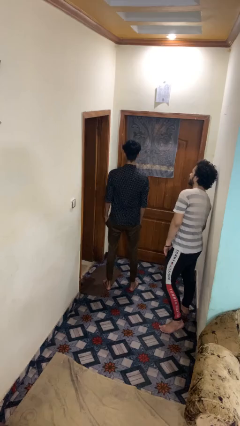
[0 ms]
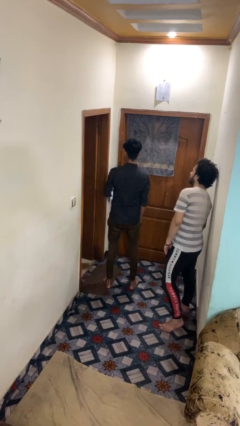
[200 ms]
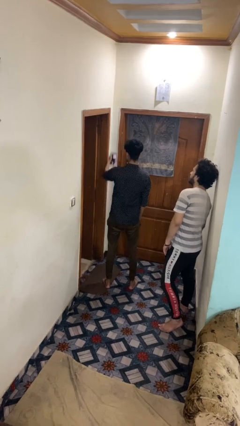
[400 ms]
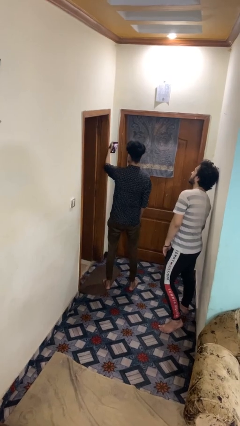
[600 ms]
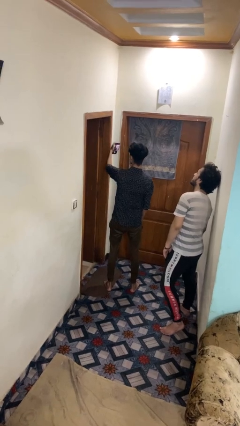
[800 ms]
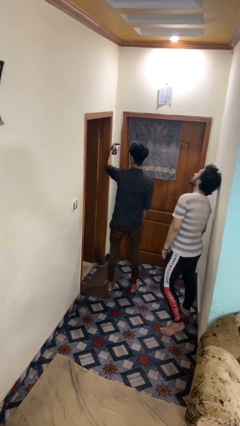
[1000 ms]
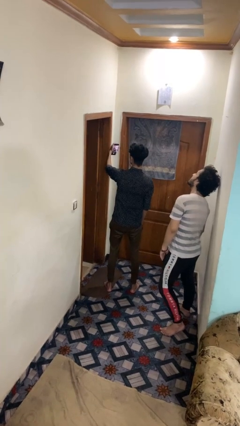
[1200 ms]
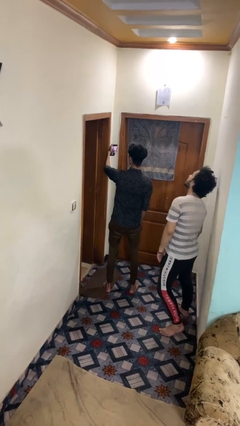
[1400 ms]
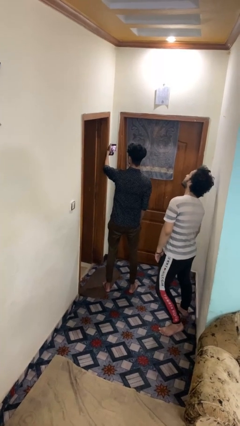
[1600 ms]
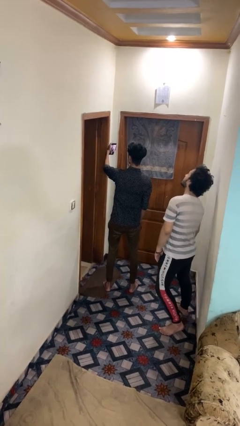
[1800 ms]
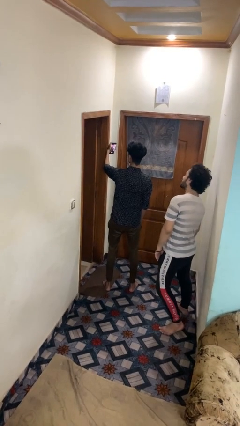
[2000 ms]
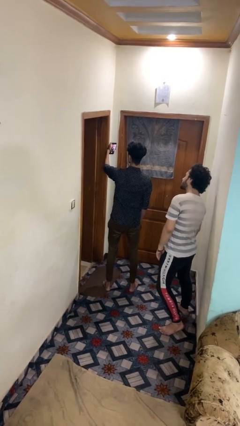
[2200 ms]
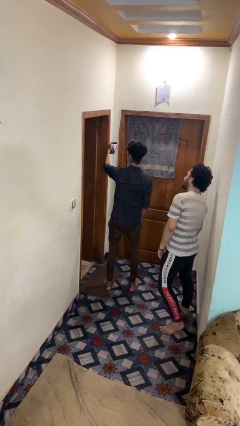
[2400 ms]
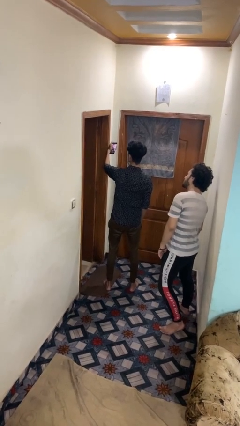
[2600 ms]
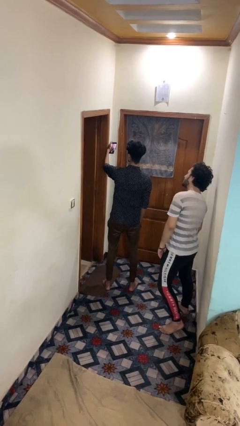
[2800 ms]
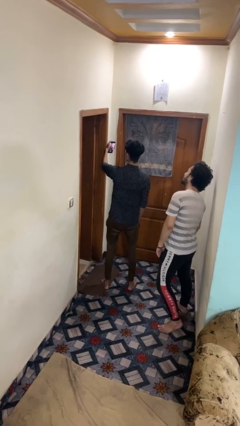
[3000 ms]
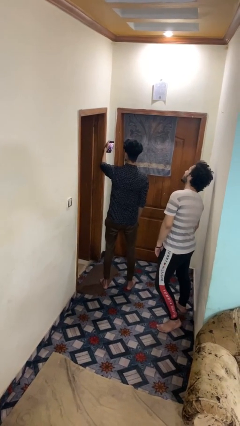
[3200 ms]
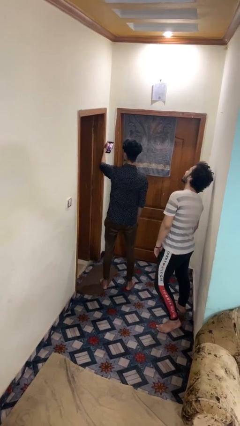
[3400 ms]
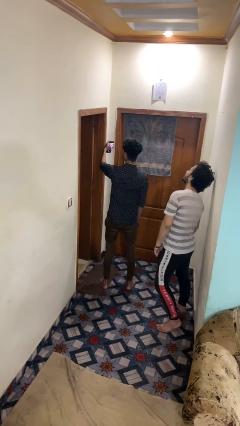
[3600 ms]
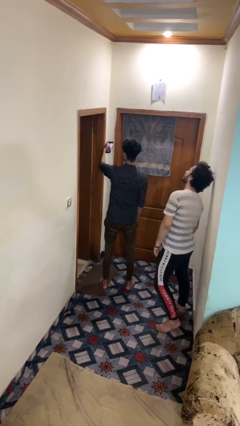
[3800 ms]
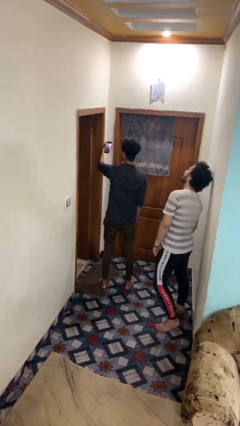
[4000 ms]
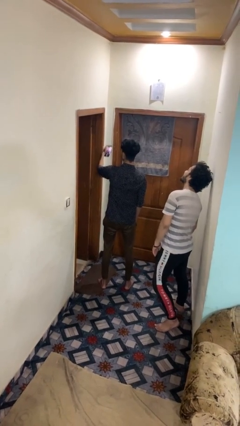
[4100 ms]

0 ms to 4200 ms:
person takes selfie with person

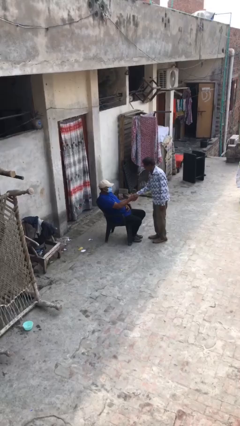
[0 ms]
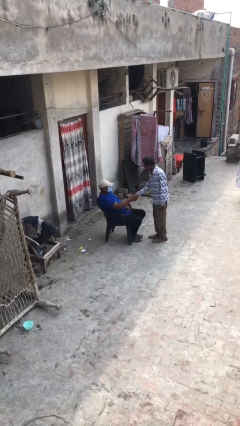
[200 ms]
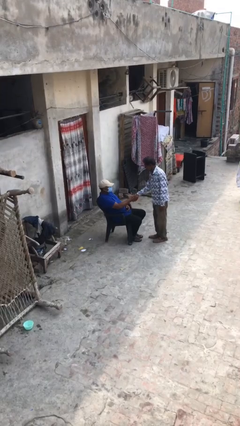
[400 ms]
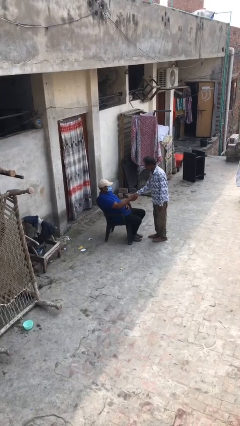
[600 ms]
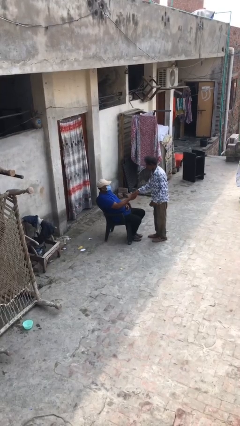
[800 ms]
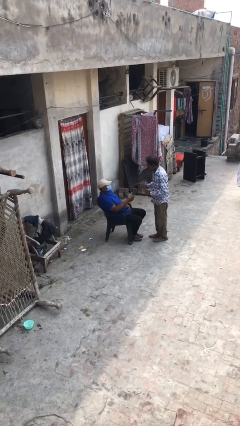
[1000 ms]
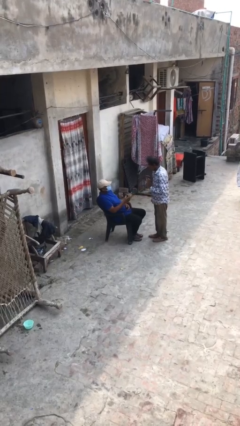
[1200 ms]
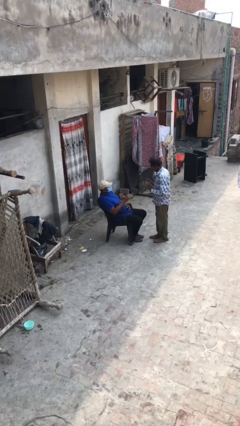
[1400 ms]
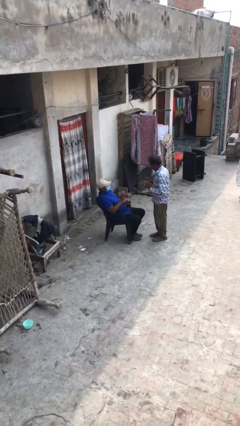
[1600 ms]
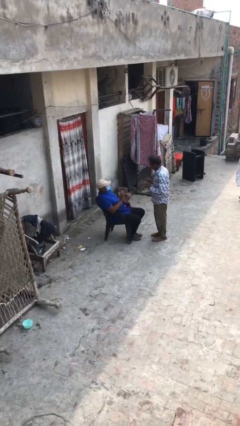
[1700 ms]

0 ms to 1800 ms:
person shakes hand

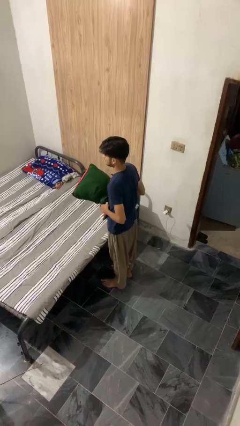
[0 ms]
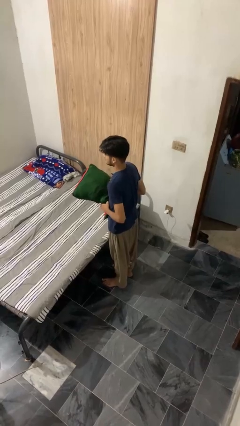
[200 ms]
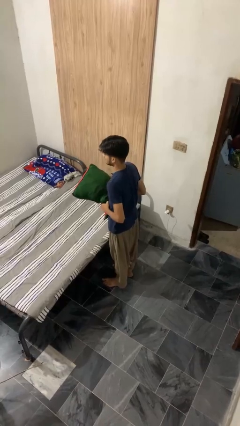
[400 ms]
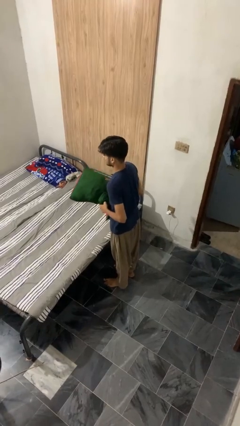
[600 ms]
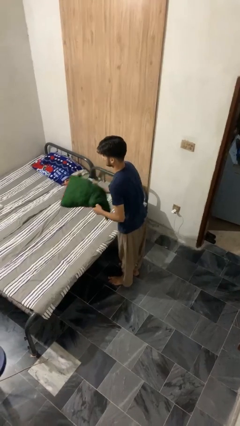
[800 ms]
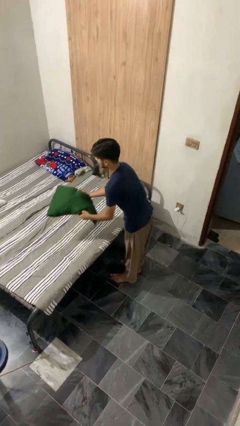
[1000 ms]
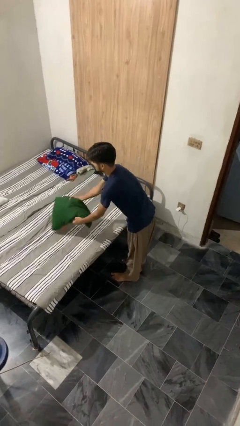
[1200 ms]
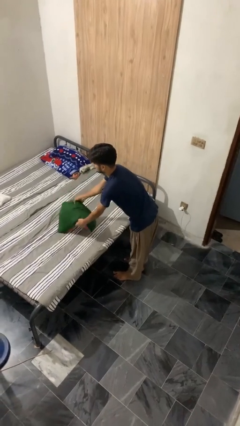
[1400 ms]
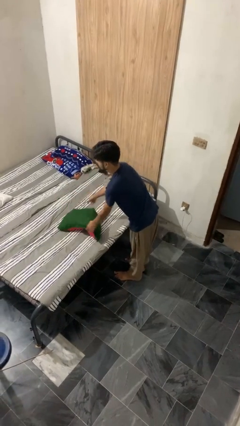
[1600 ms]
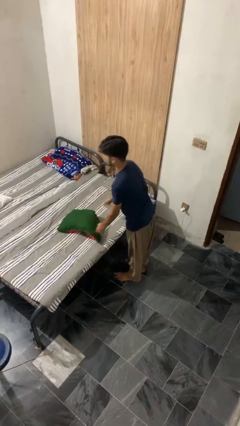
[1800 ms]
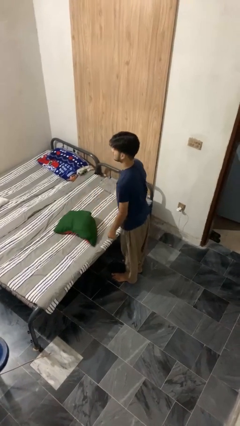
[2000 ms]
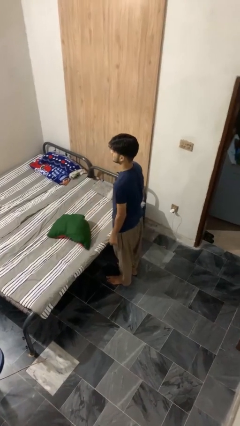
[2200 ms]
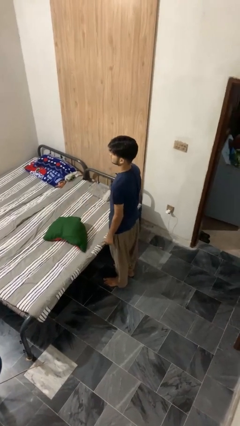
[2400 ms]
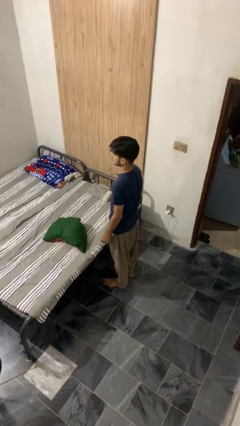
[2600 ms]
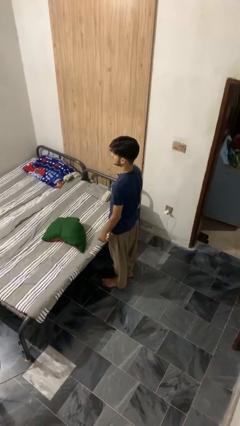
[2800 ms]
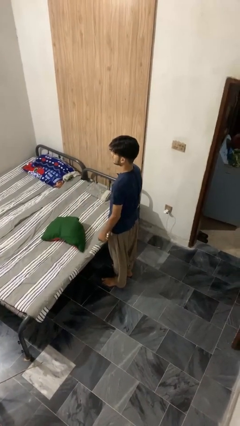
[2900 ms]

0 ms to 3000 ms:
person puts down object on bed

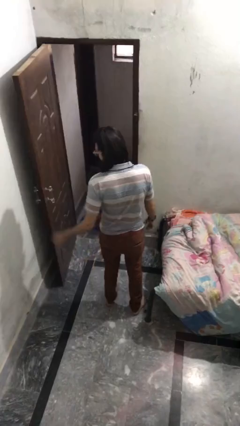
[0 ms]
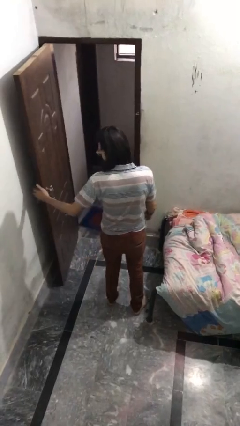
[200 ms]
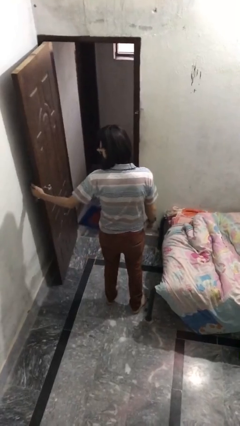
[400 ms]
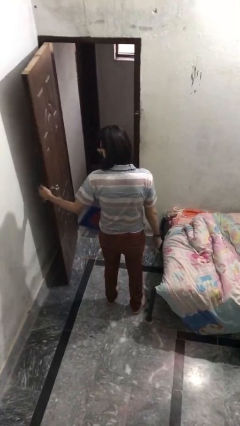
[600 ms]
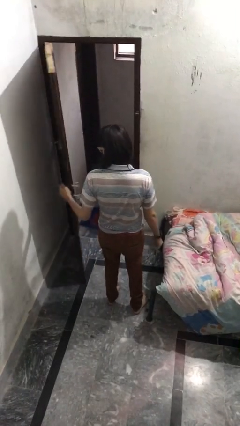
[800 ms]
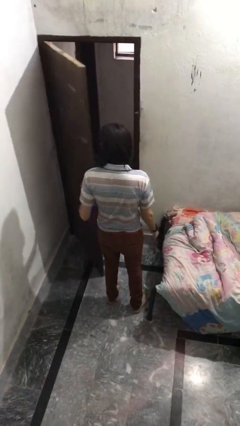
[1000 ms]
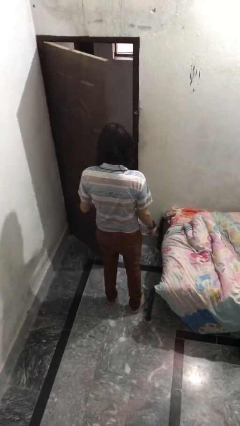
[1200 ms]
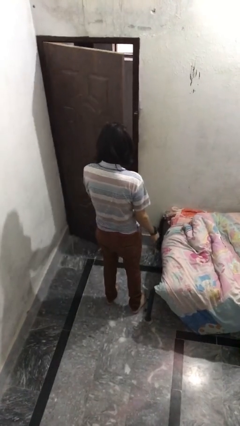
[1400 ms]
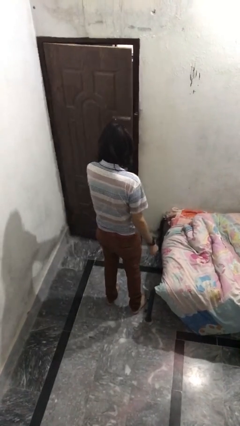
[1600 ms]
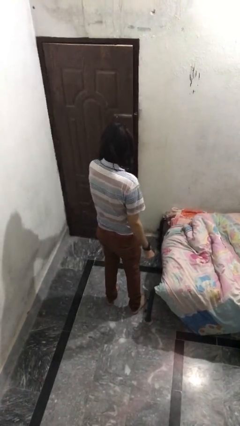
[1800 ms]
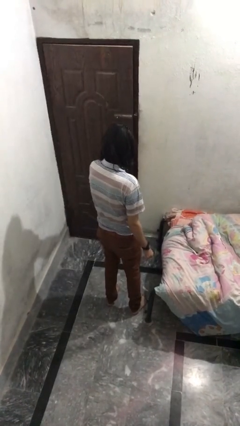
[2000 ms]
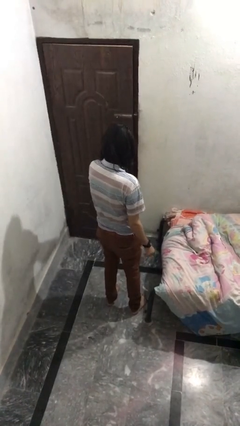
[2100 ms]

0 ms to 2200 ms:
person closes facility door

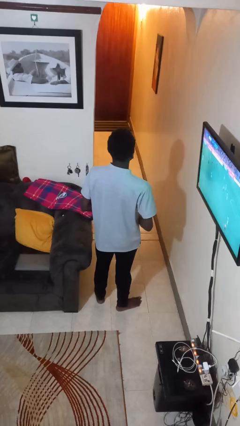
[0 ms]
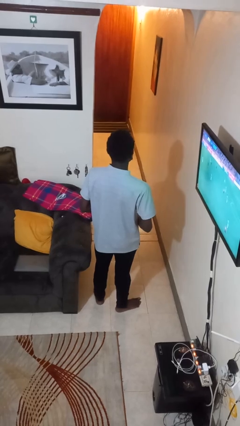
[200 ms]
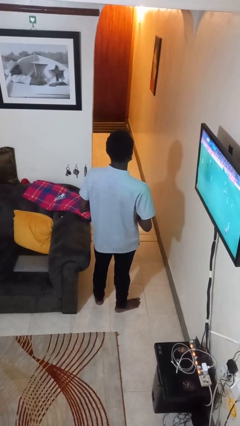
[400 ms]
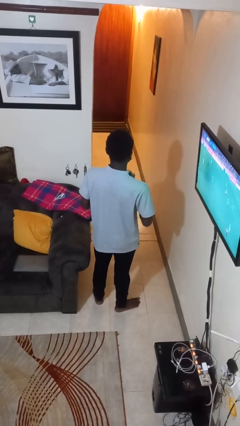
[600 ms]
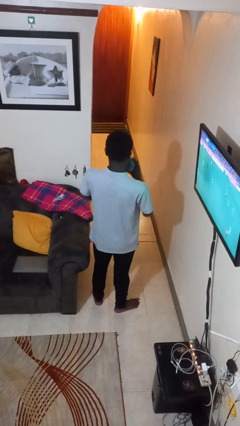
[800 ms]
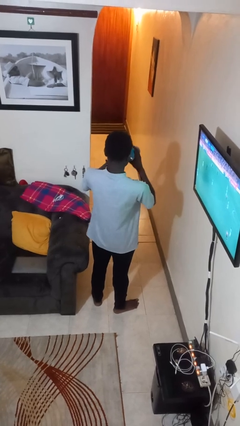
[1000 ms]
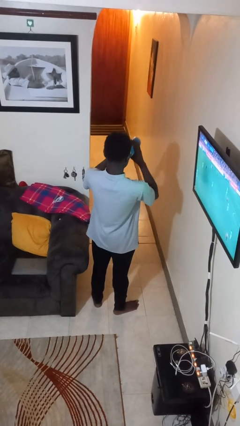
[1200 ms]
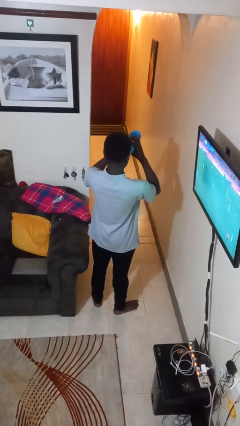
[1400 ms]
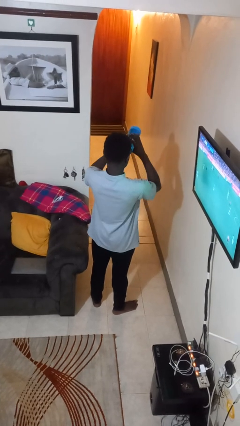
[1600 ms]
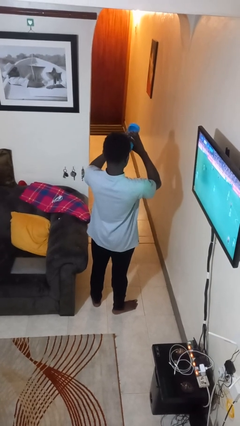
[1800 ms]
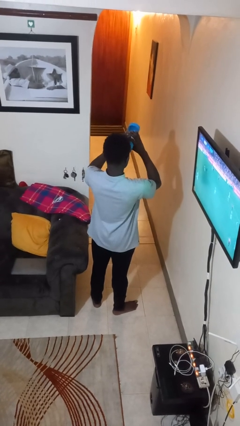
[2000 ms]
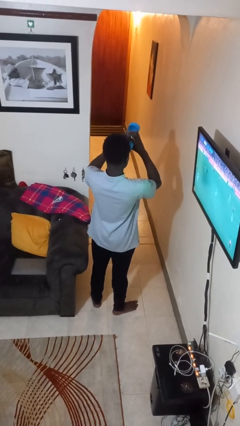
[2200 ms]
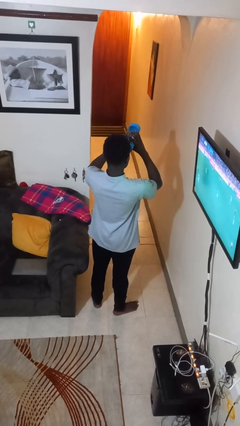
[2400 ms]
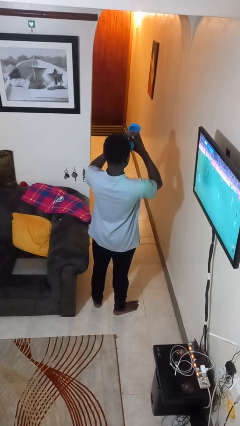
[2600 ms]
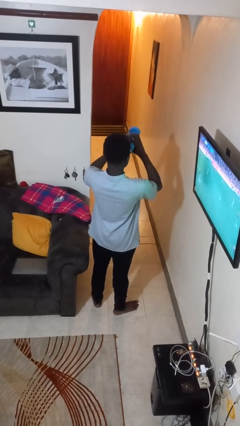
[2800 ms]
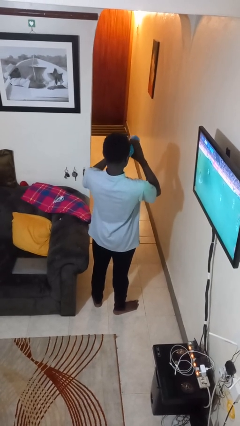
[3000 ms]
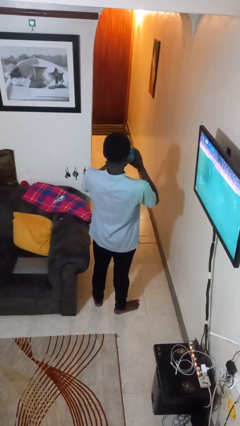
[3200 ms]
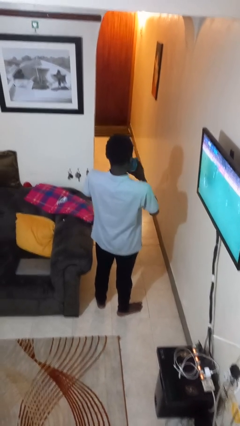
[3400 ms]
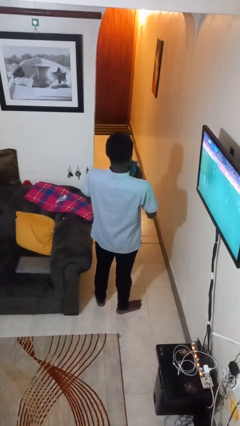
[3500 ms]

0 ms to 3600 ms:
person drinks from bottle

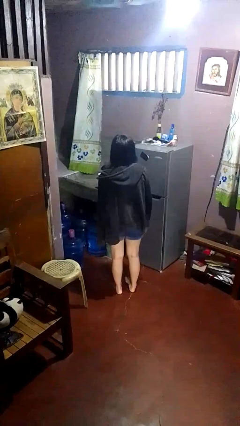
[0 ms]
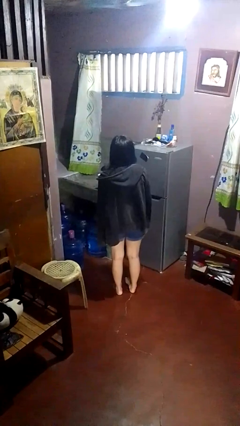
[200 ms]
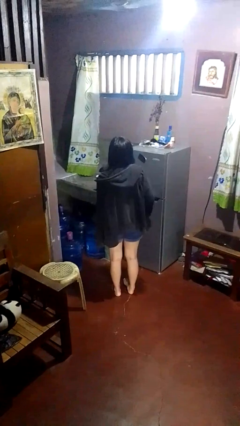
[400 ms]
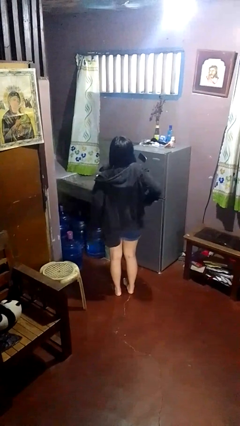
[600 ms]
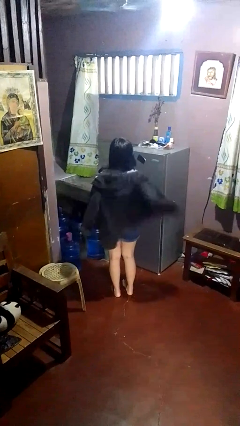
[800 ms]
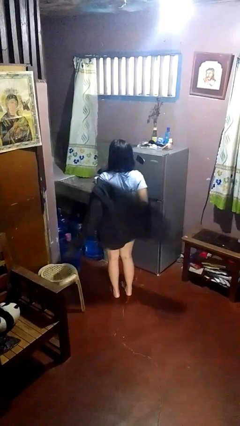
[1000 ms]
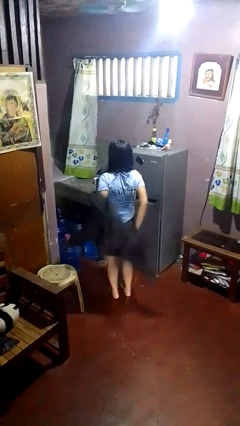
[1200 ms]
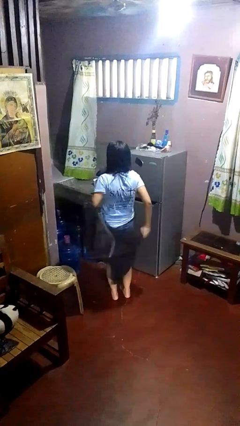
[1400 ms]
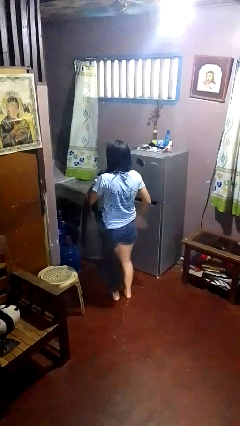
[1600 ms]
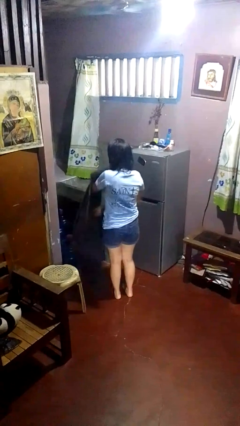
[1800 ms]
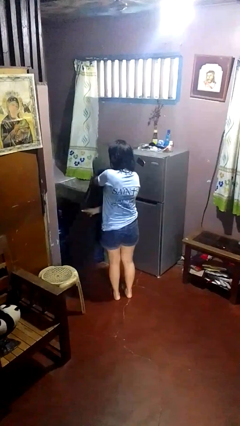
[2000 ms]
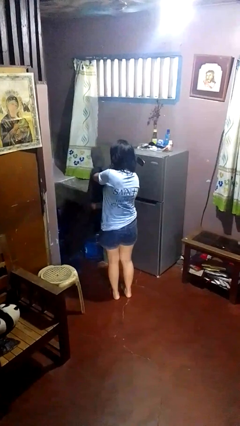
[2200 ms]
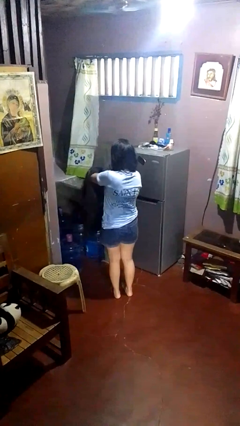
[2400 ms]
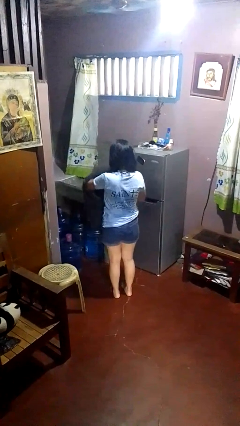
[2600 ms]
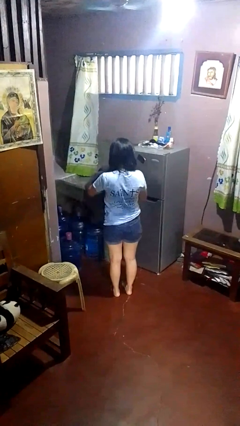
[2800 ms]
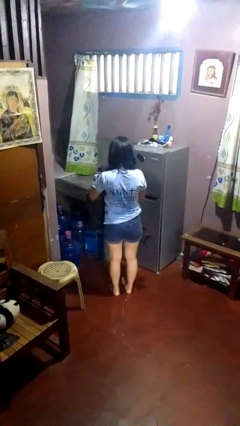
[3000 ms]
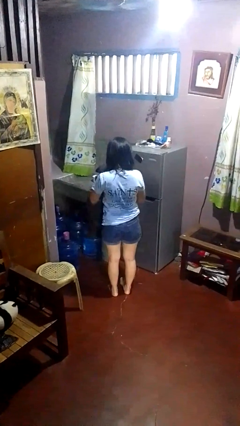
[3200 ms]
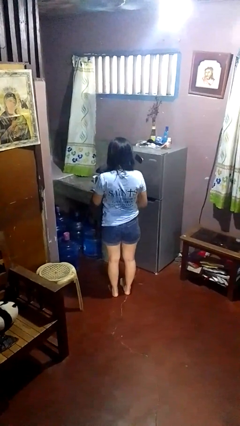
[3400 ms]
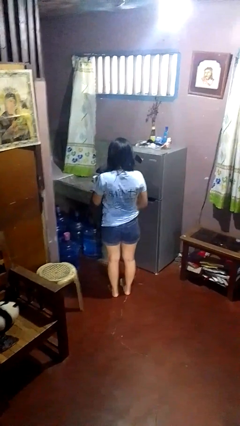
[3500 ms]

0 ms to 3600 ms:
person takes off jacket
